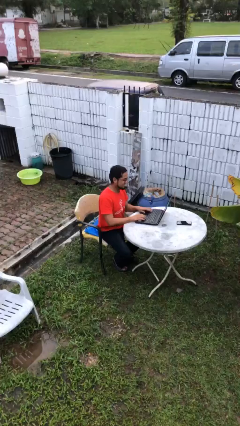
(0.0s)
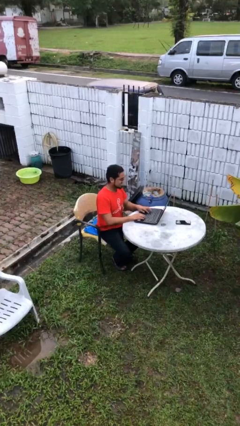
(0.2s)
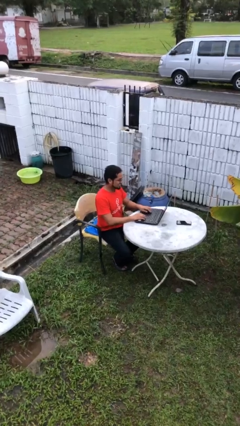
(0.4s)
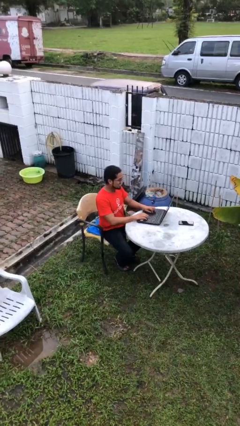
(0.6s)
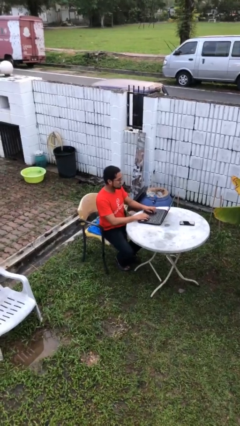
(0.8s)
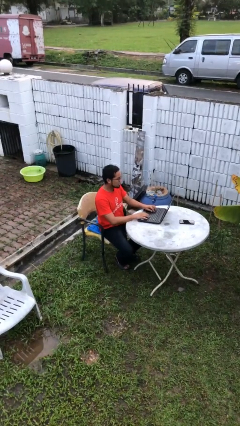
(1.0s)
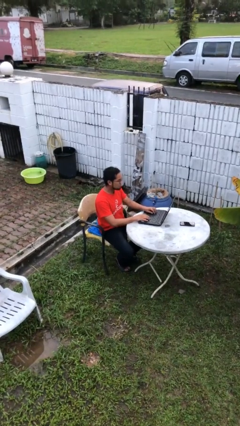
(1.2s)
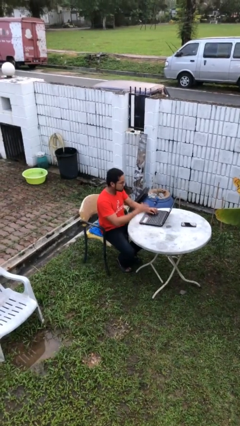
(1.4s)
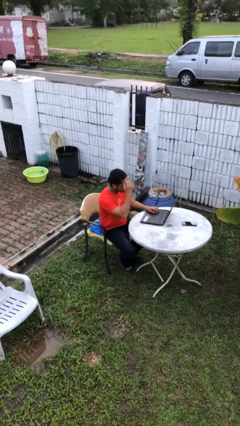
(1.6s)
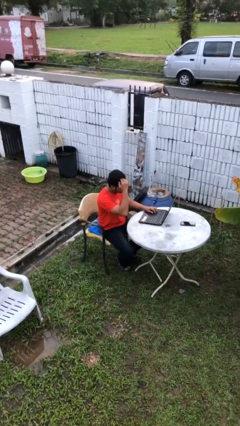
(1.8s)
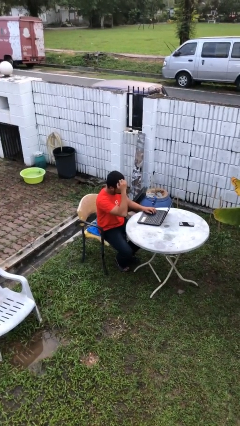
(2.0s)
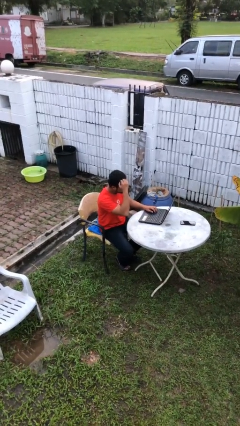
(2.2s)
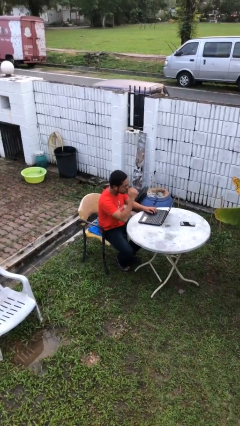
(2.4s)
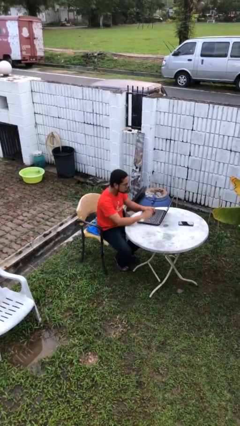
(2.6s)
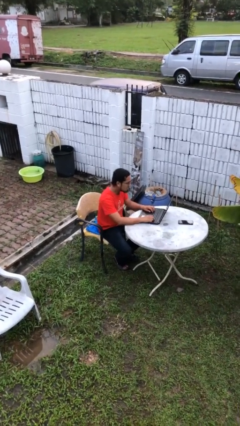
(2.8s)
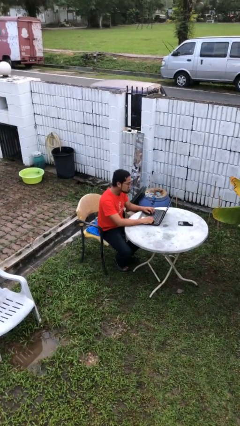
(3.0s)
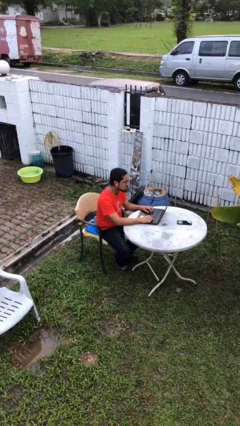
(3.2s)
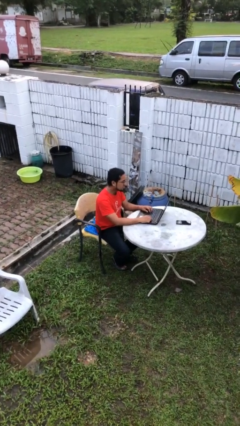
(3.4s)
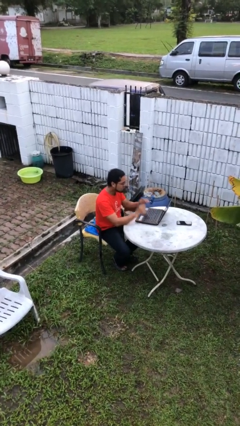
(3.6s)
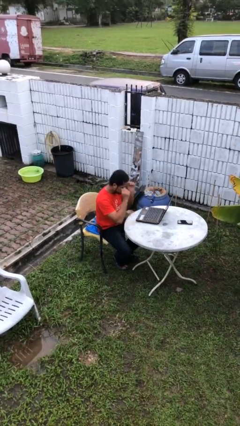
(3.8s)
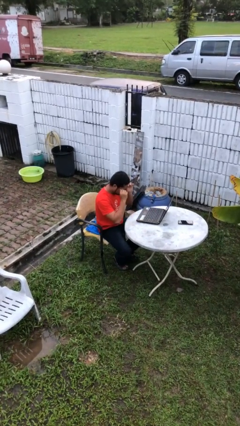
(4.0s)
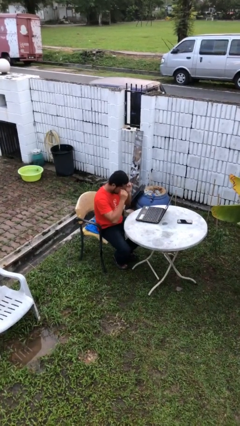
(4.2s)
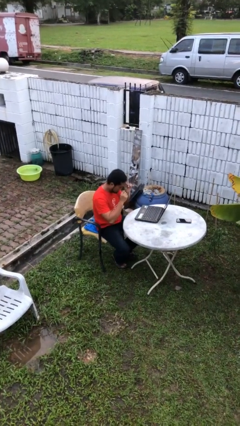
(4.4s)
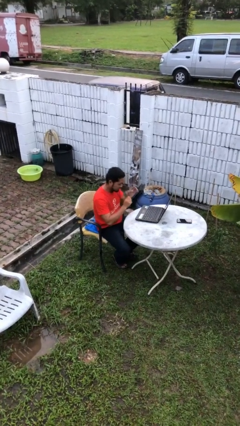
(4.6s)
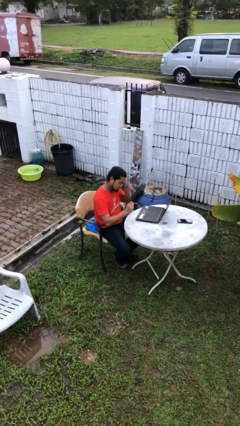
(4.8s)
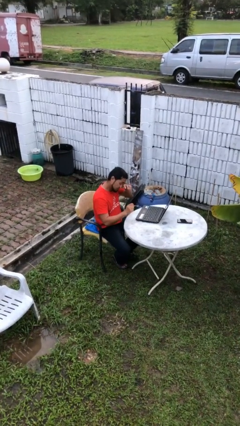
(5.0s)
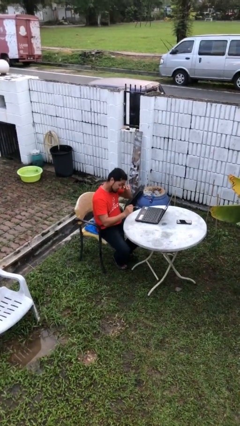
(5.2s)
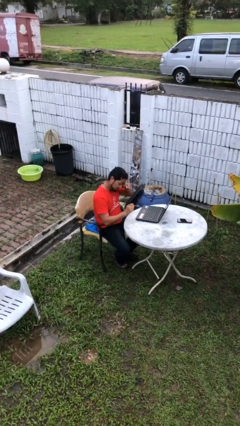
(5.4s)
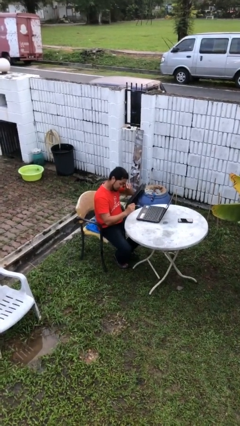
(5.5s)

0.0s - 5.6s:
person interacts with laptop

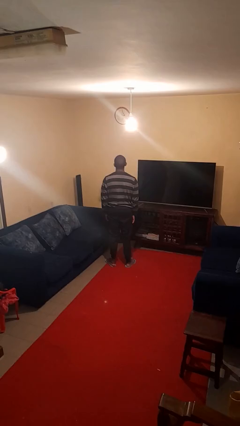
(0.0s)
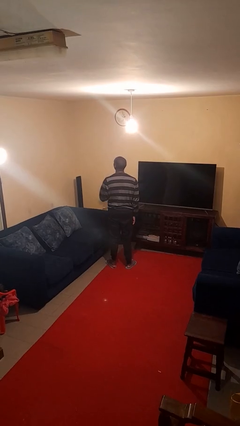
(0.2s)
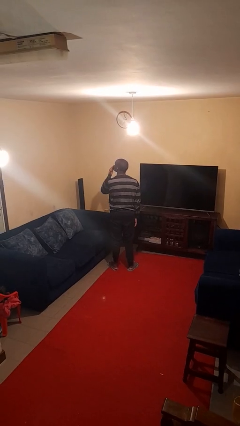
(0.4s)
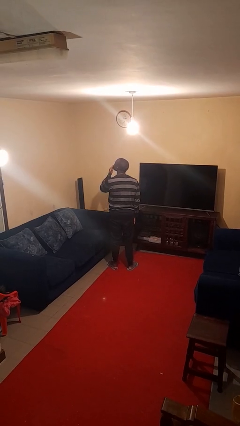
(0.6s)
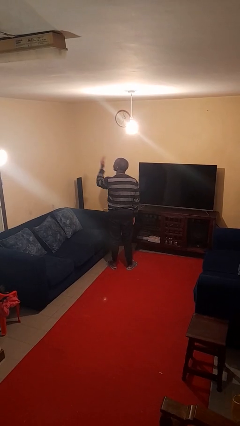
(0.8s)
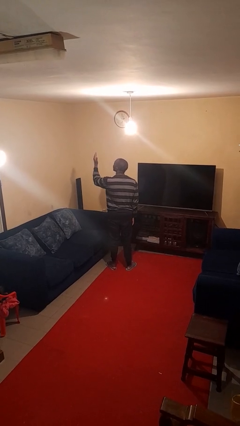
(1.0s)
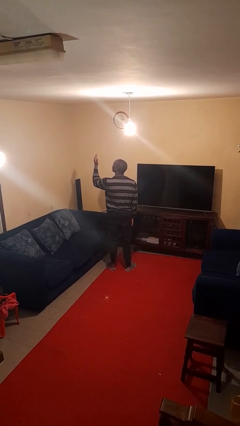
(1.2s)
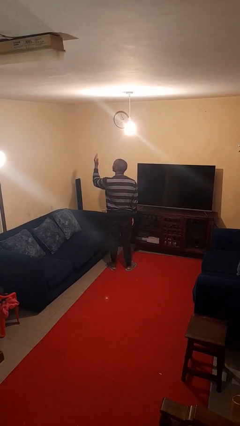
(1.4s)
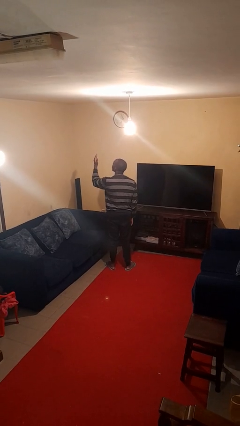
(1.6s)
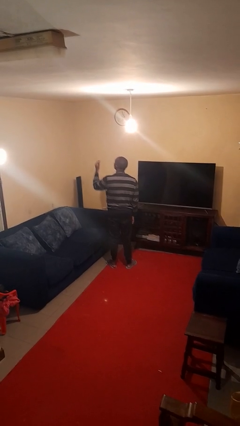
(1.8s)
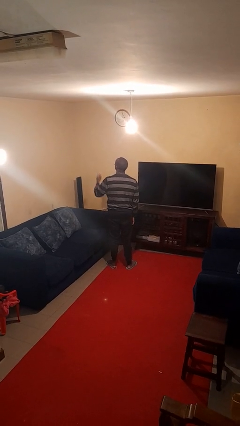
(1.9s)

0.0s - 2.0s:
person gestures blow kiss

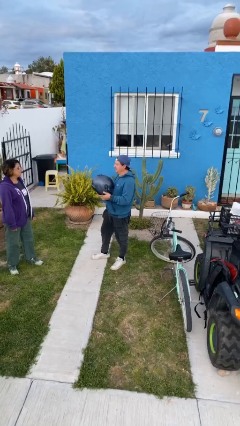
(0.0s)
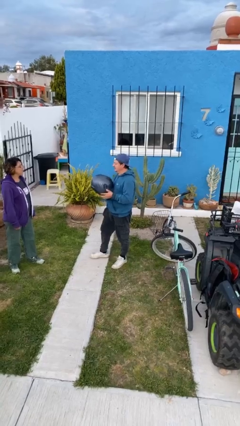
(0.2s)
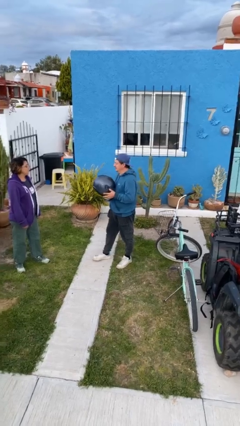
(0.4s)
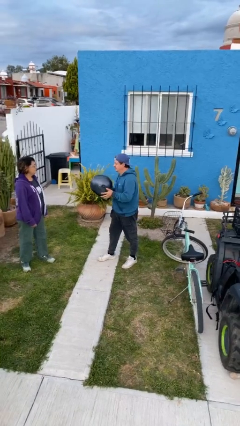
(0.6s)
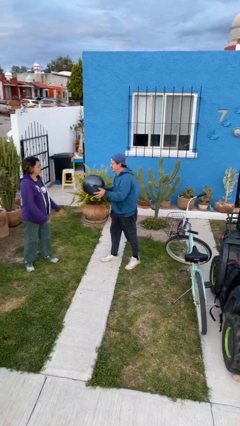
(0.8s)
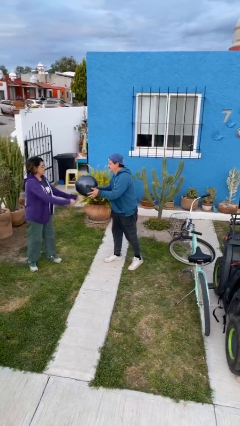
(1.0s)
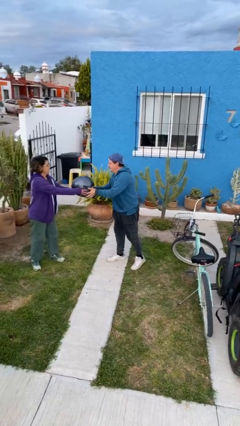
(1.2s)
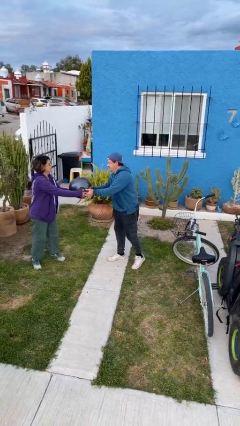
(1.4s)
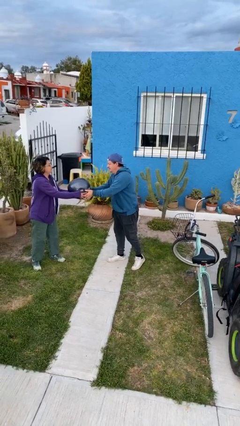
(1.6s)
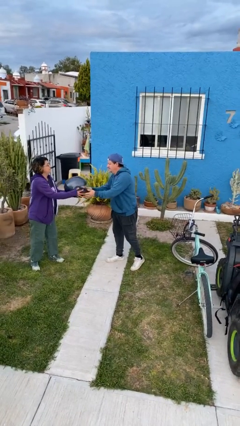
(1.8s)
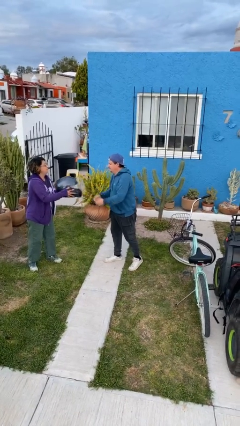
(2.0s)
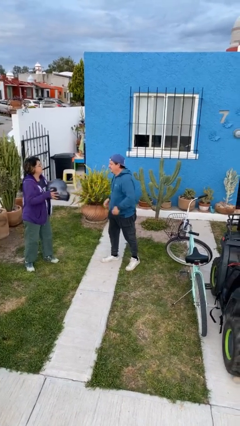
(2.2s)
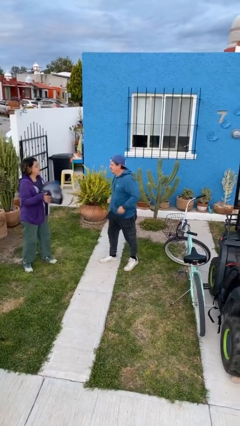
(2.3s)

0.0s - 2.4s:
person transfers object to person

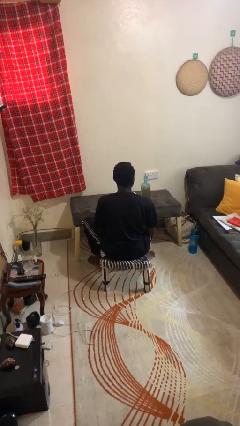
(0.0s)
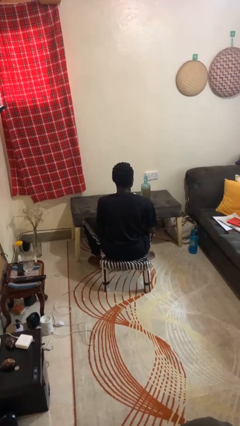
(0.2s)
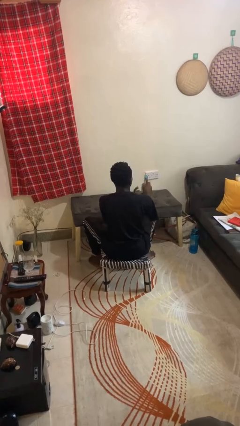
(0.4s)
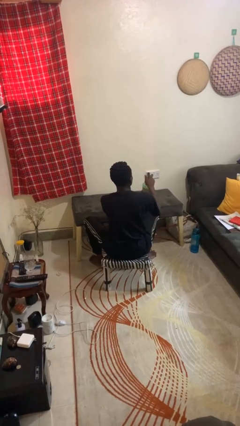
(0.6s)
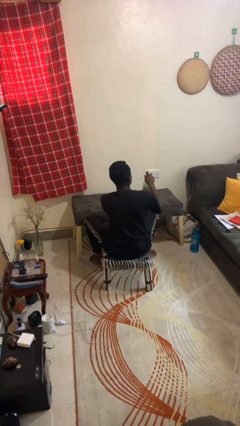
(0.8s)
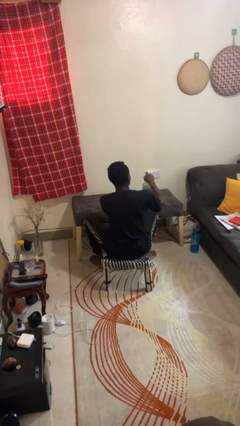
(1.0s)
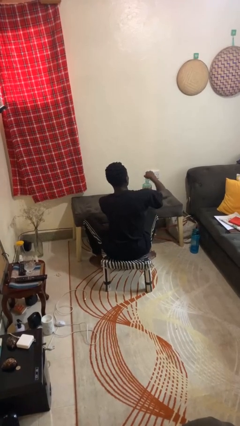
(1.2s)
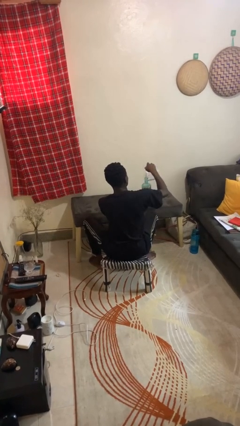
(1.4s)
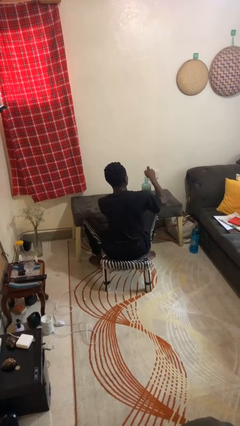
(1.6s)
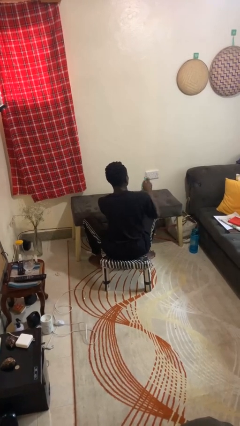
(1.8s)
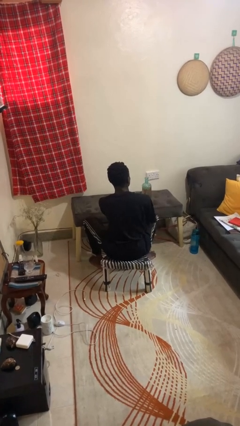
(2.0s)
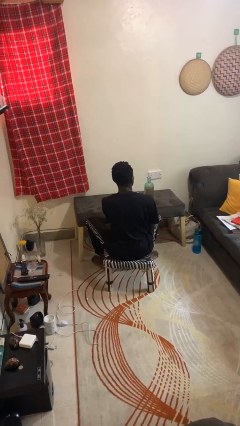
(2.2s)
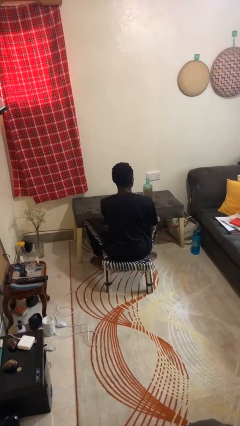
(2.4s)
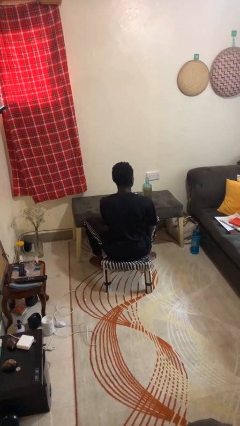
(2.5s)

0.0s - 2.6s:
person opens jar

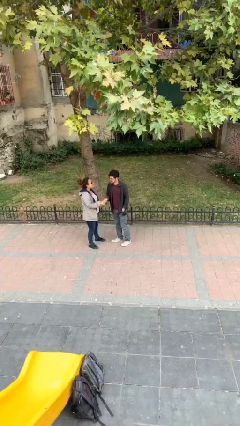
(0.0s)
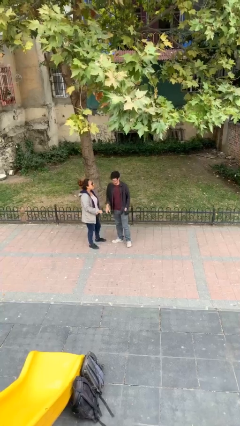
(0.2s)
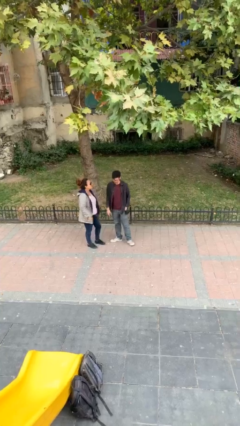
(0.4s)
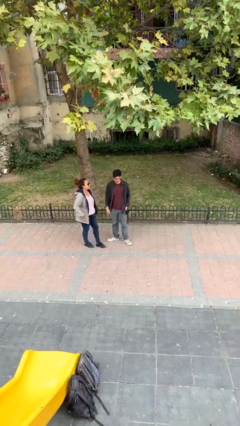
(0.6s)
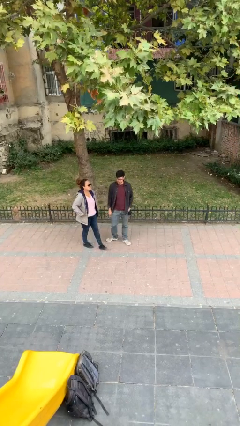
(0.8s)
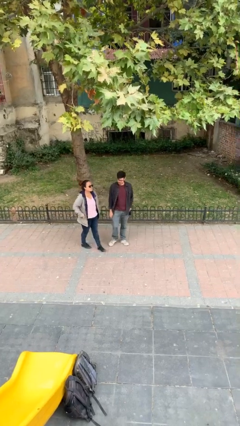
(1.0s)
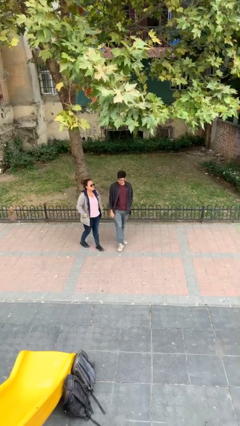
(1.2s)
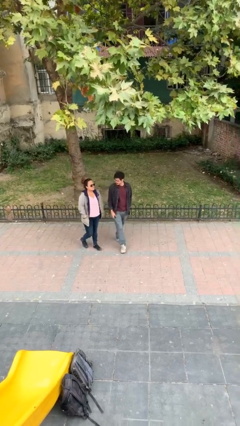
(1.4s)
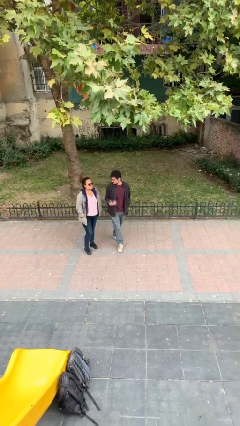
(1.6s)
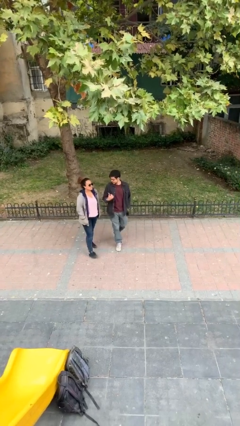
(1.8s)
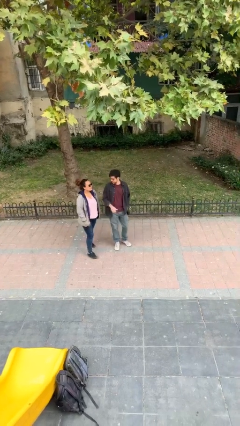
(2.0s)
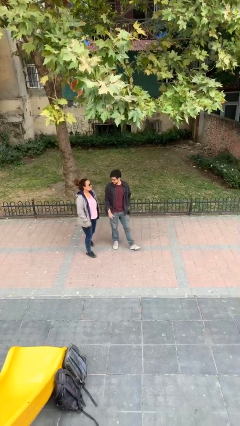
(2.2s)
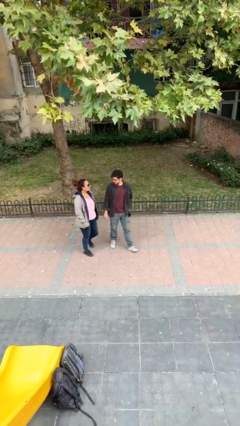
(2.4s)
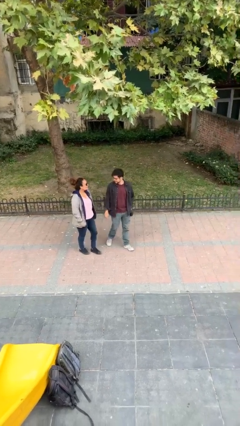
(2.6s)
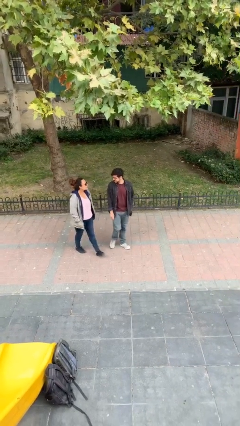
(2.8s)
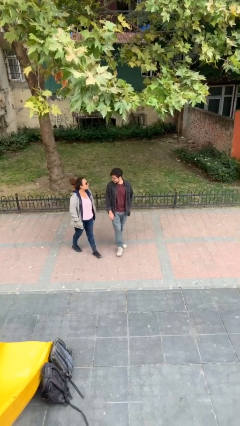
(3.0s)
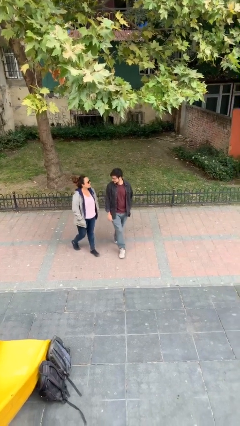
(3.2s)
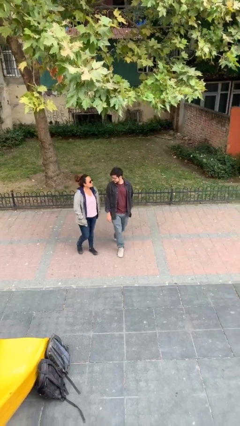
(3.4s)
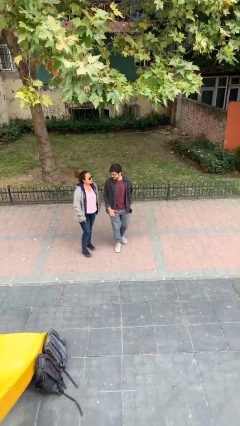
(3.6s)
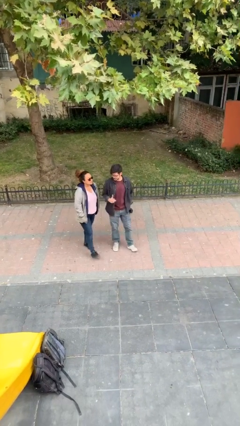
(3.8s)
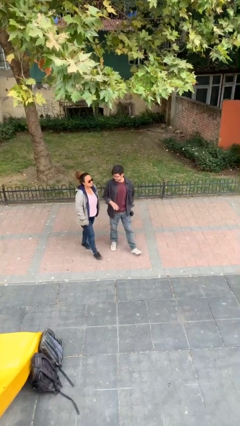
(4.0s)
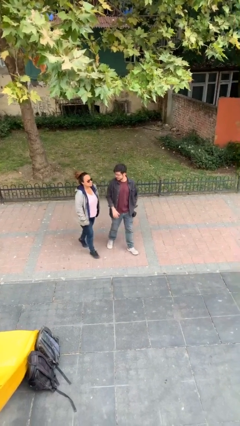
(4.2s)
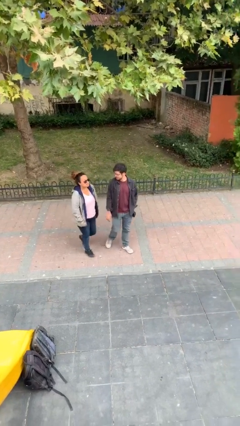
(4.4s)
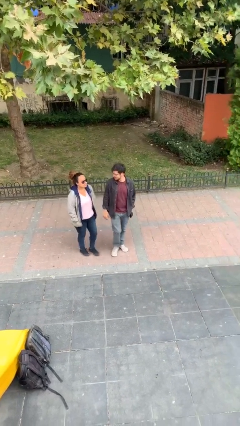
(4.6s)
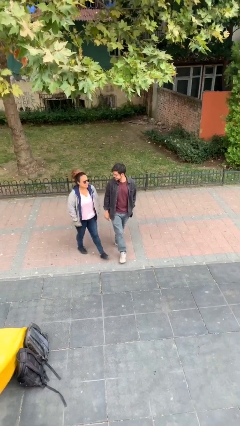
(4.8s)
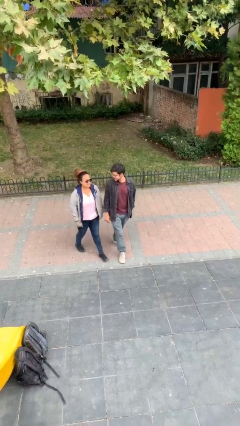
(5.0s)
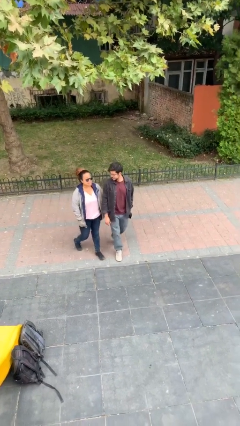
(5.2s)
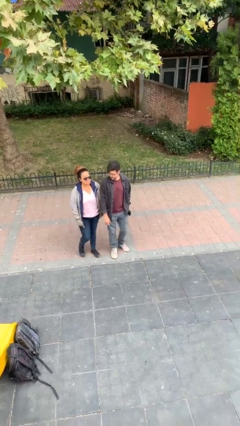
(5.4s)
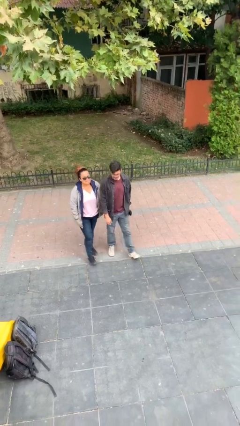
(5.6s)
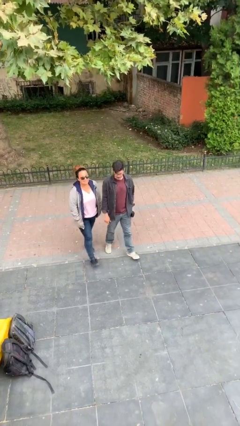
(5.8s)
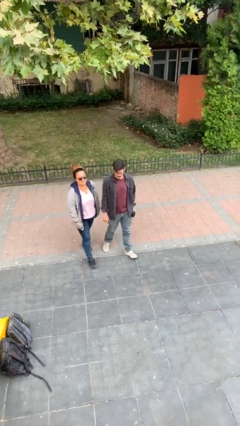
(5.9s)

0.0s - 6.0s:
person talks to person
